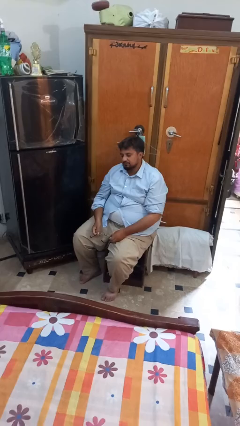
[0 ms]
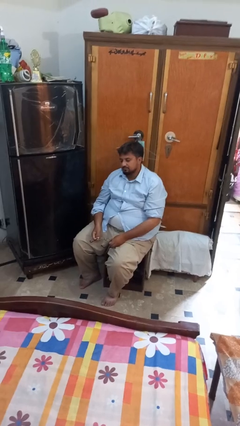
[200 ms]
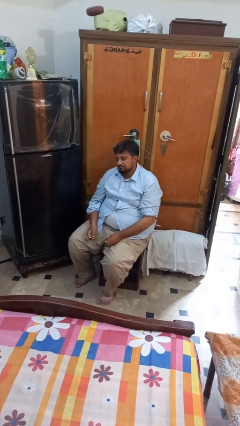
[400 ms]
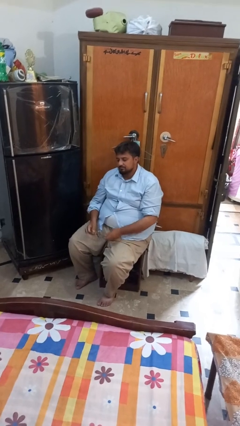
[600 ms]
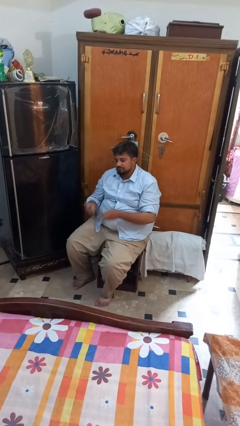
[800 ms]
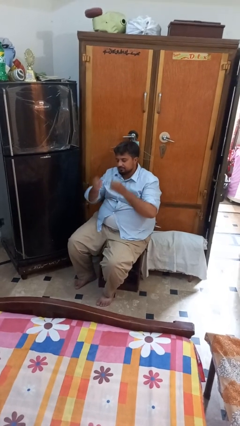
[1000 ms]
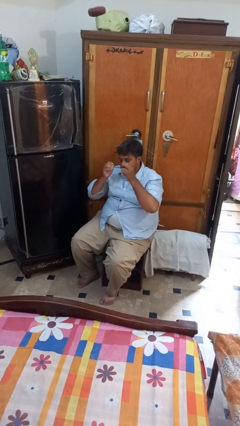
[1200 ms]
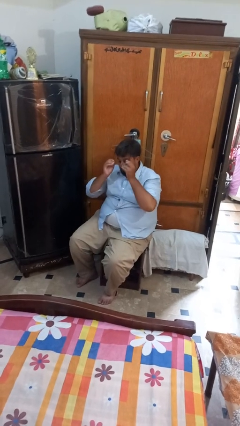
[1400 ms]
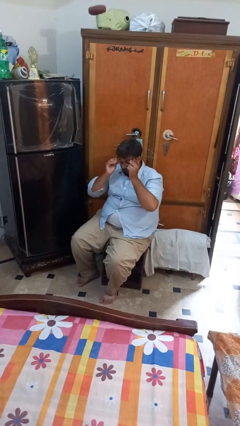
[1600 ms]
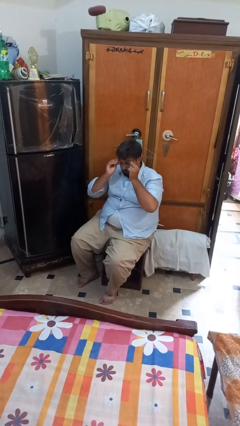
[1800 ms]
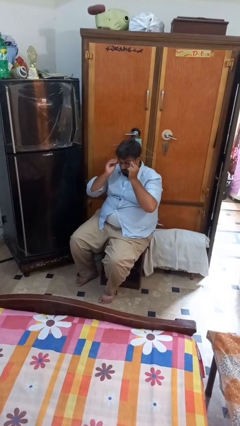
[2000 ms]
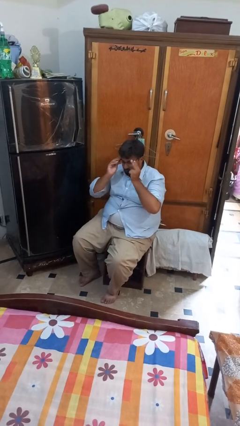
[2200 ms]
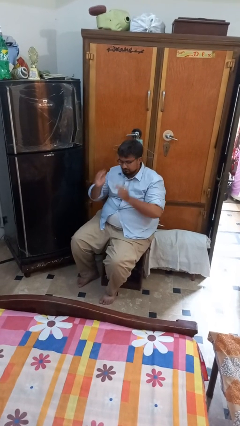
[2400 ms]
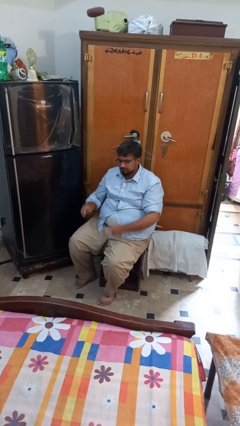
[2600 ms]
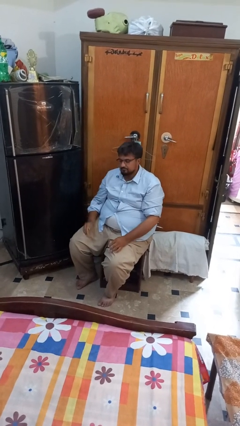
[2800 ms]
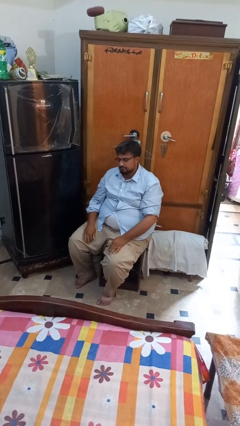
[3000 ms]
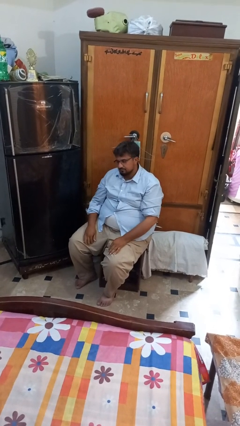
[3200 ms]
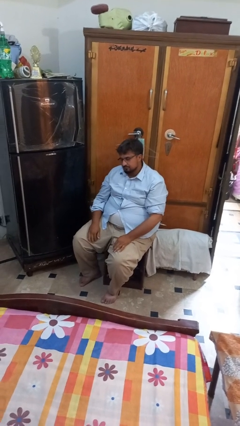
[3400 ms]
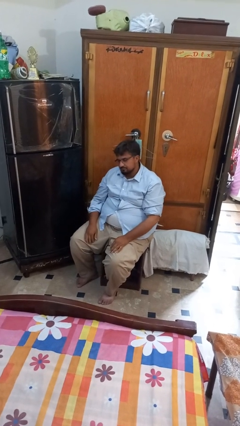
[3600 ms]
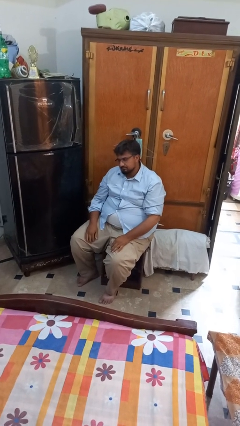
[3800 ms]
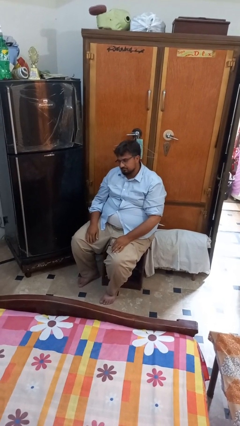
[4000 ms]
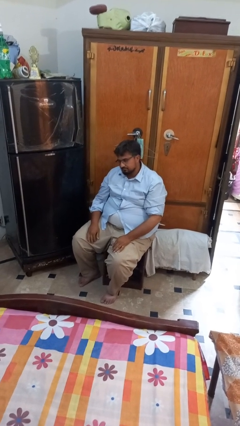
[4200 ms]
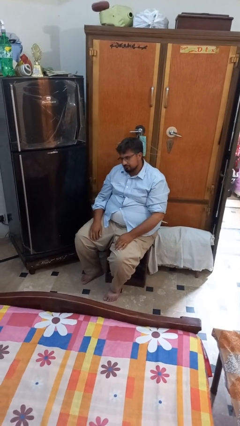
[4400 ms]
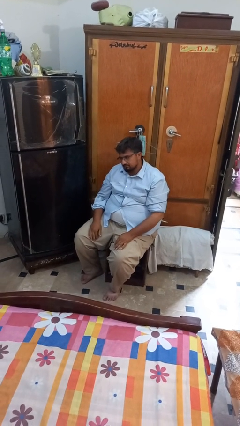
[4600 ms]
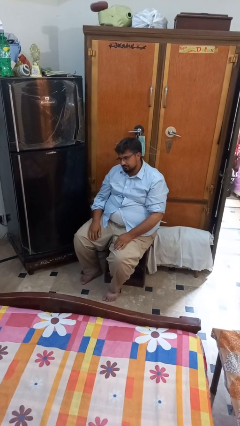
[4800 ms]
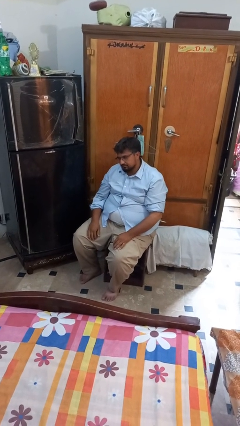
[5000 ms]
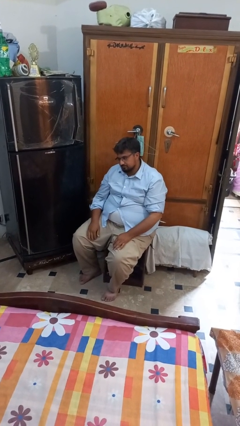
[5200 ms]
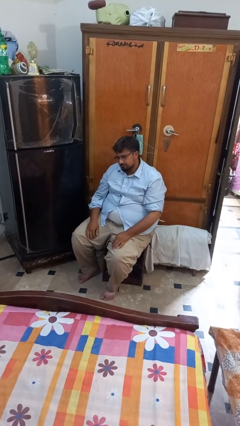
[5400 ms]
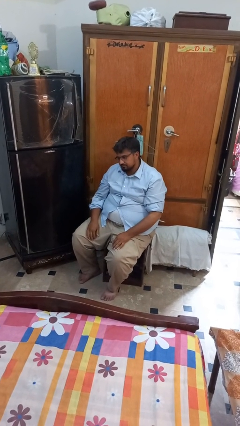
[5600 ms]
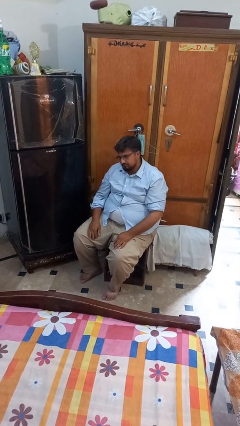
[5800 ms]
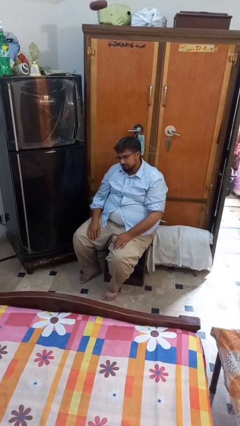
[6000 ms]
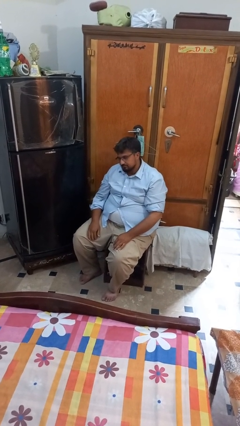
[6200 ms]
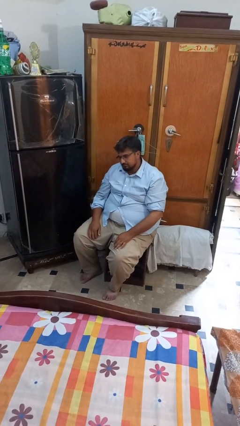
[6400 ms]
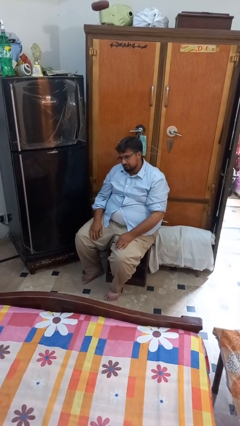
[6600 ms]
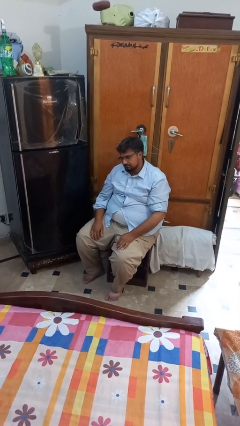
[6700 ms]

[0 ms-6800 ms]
person puts on glasses

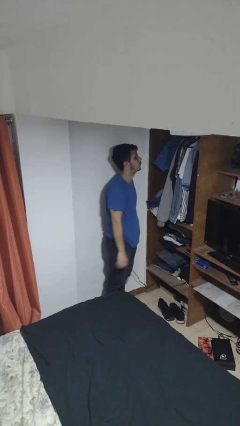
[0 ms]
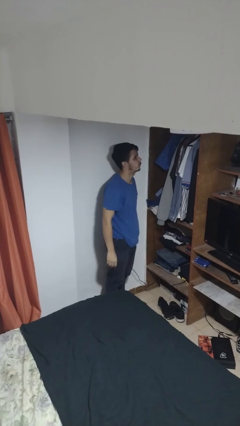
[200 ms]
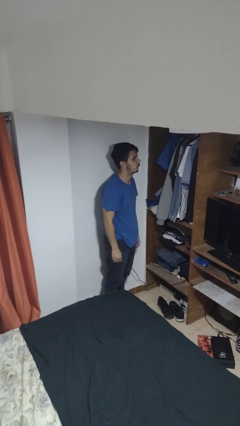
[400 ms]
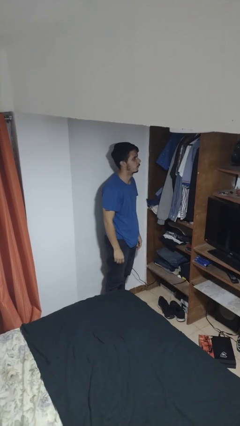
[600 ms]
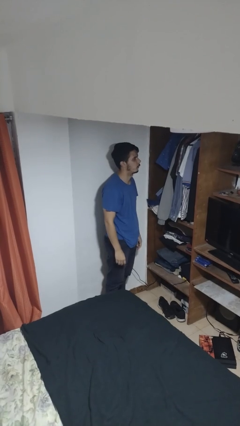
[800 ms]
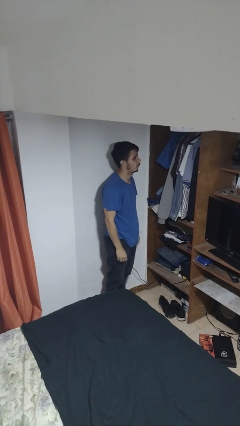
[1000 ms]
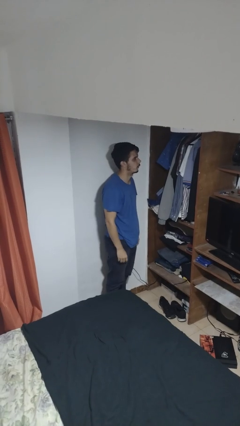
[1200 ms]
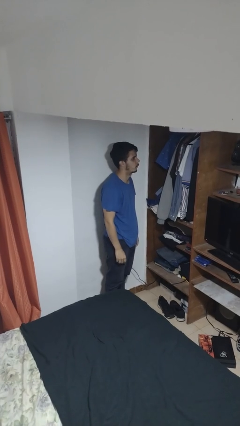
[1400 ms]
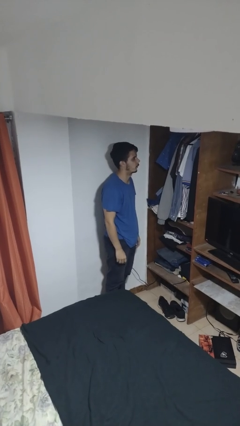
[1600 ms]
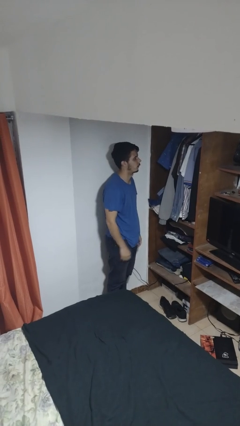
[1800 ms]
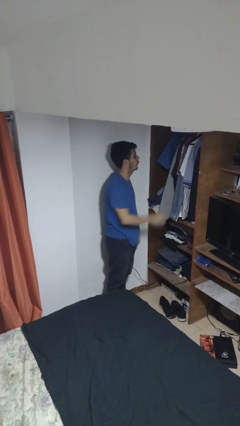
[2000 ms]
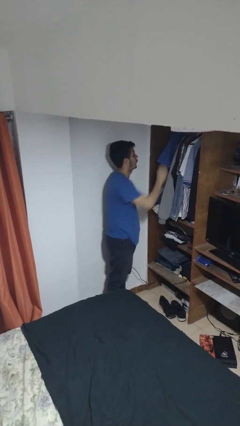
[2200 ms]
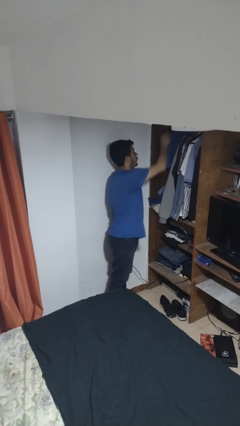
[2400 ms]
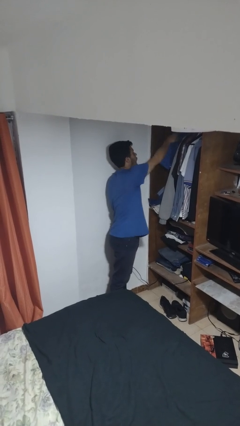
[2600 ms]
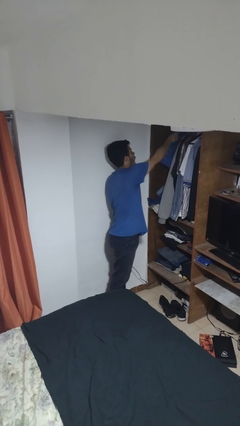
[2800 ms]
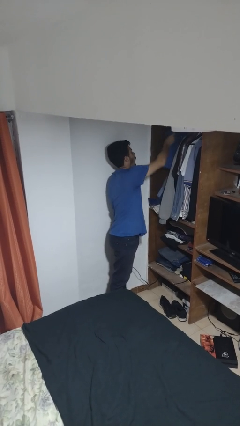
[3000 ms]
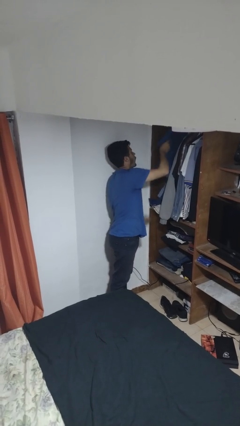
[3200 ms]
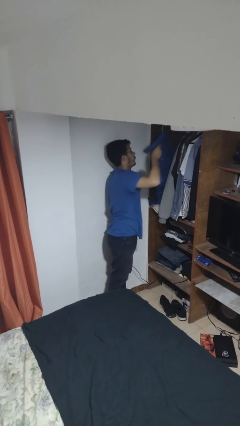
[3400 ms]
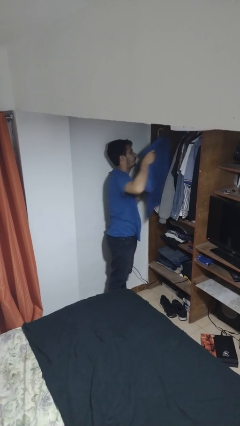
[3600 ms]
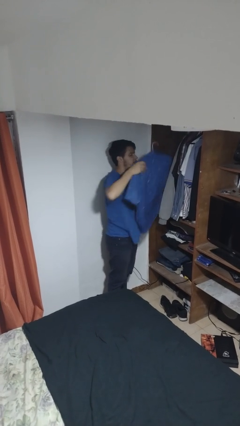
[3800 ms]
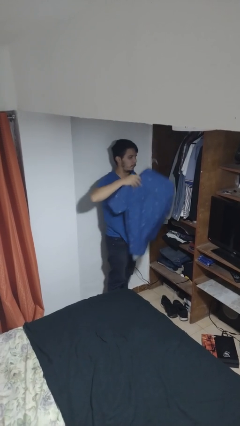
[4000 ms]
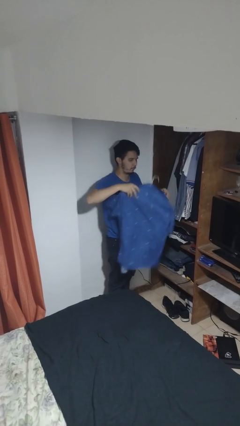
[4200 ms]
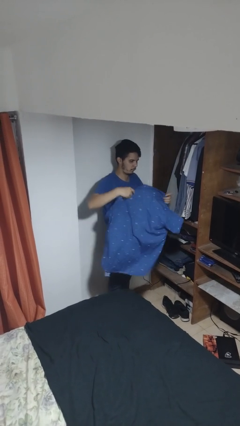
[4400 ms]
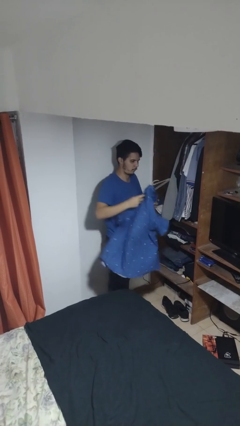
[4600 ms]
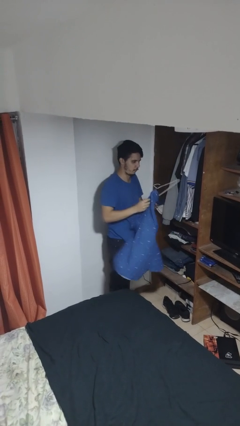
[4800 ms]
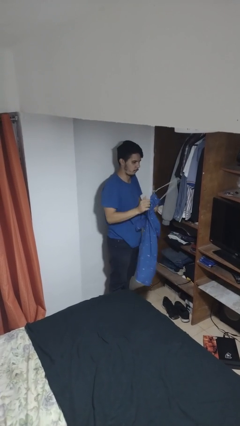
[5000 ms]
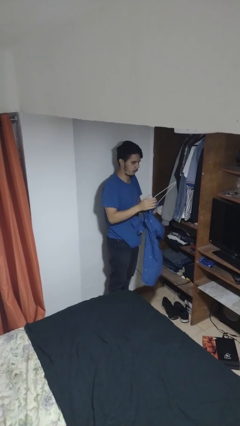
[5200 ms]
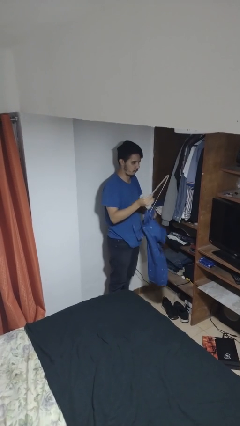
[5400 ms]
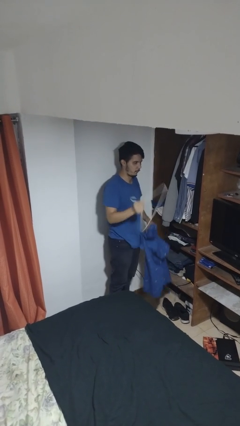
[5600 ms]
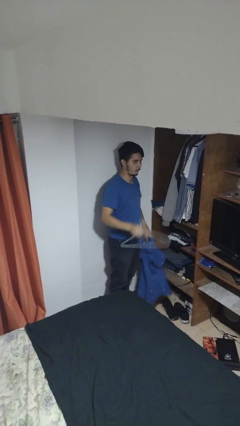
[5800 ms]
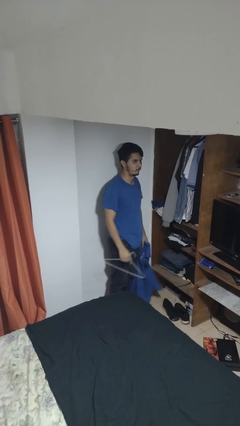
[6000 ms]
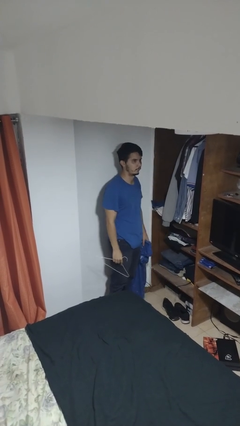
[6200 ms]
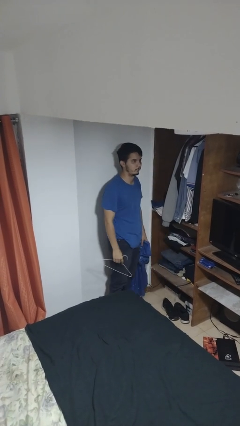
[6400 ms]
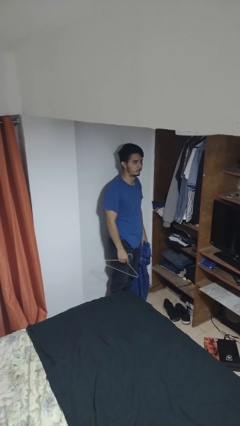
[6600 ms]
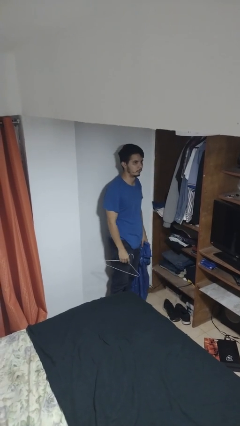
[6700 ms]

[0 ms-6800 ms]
person takes clothes from closet

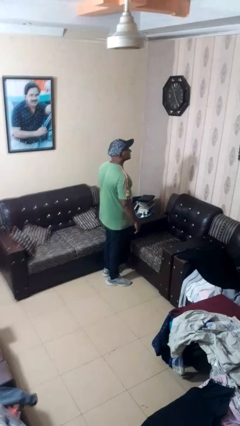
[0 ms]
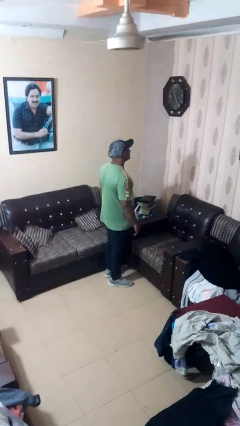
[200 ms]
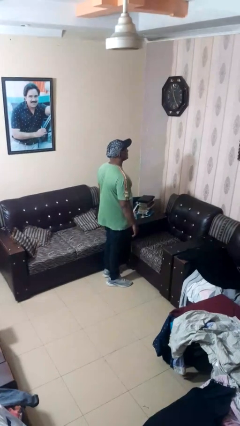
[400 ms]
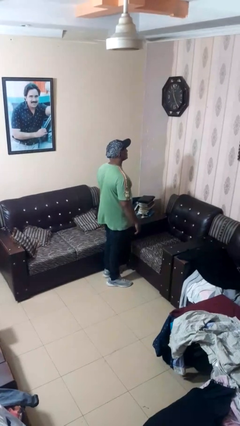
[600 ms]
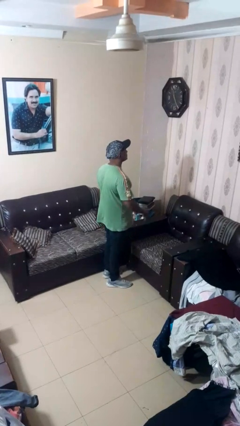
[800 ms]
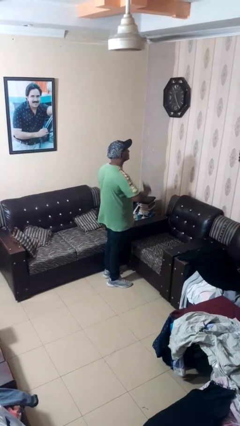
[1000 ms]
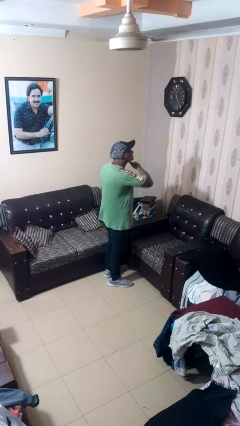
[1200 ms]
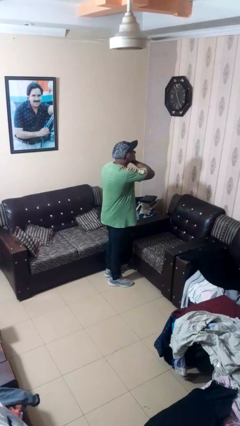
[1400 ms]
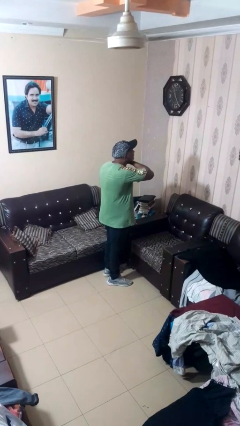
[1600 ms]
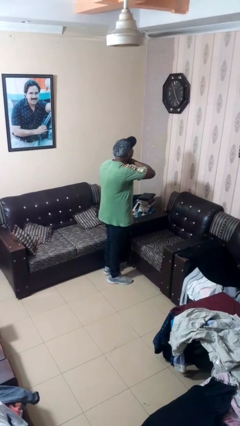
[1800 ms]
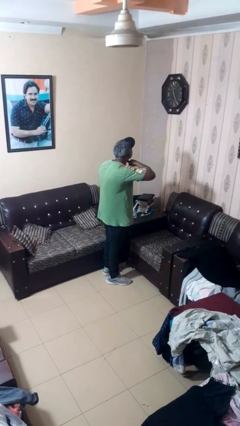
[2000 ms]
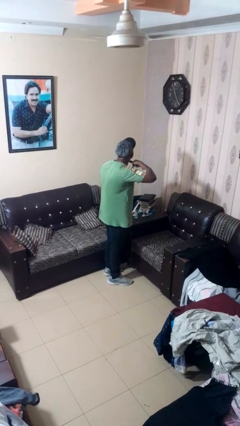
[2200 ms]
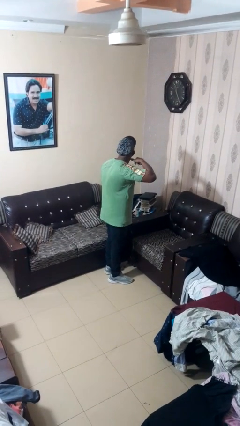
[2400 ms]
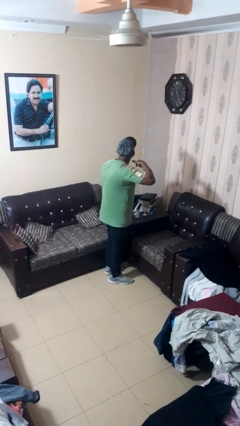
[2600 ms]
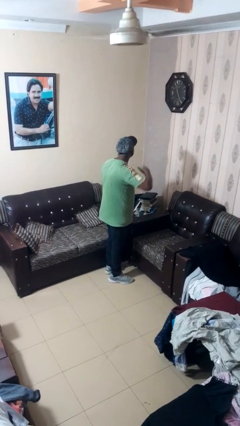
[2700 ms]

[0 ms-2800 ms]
person gestures cut

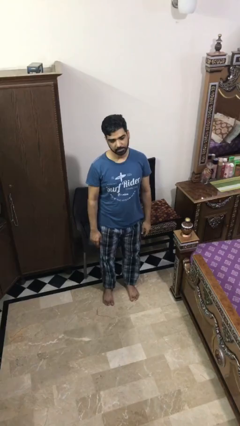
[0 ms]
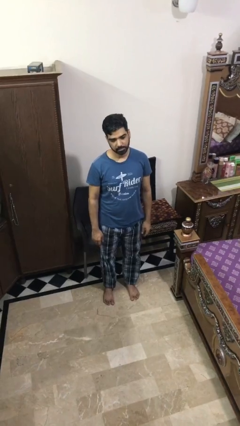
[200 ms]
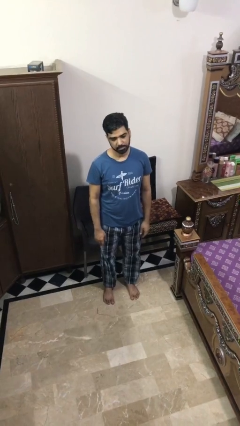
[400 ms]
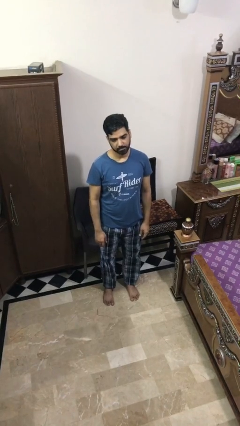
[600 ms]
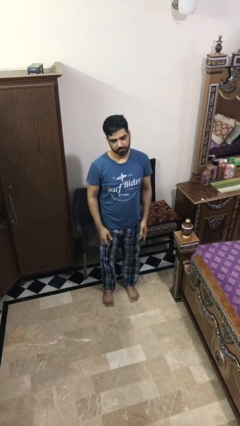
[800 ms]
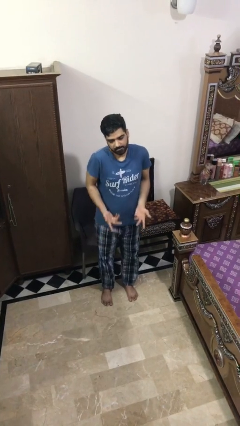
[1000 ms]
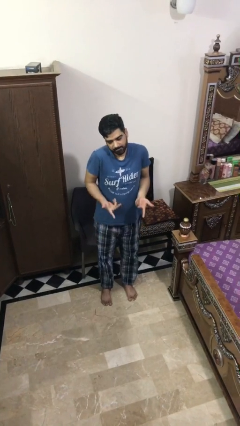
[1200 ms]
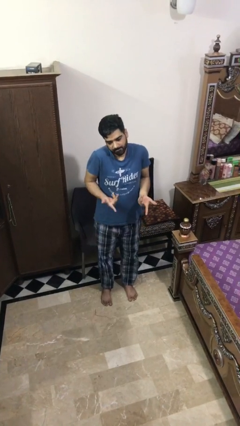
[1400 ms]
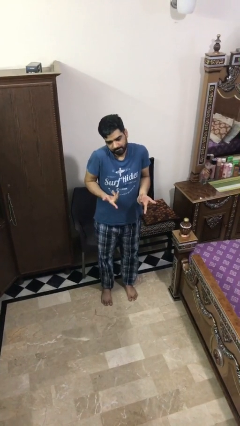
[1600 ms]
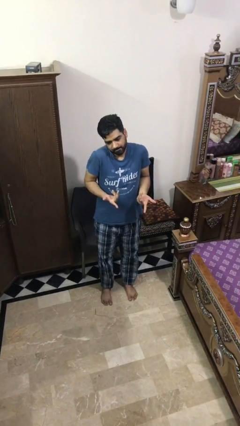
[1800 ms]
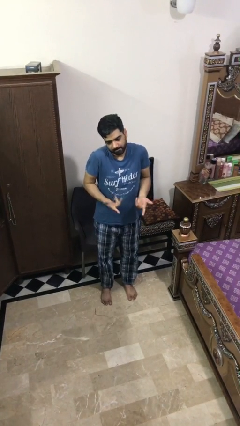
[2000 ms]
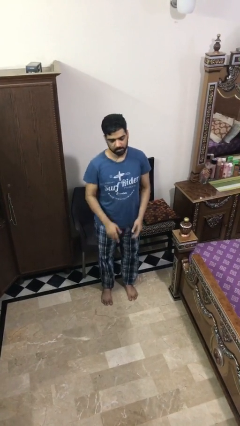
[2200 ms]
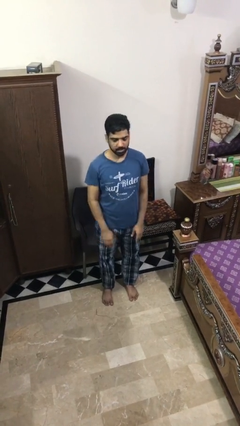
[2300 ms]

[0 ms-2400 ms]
person shrugs
